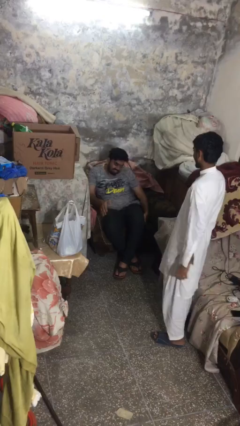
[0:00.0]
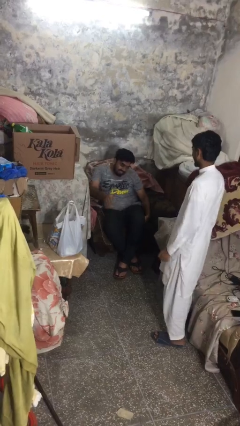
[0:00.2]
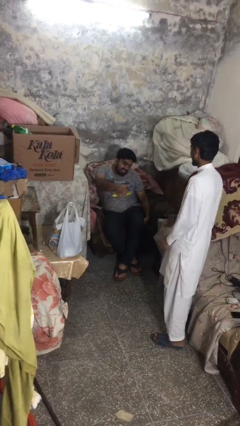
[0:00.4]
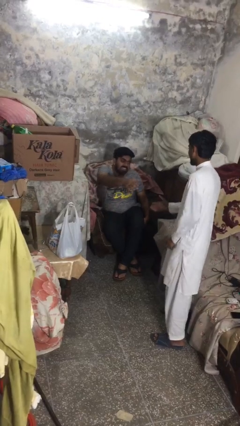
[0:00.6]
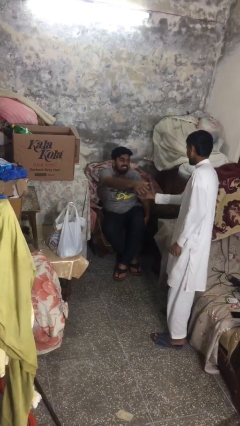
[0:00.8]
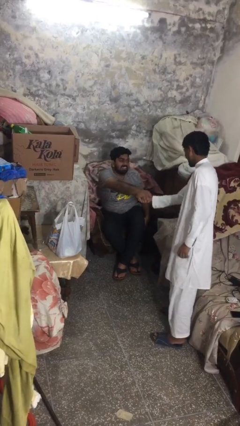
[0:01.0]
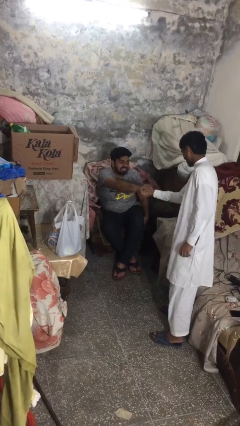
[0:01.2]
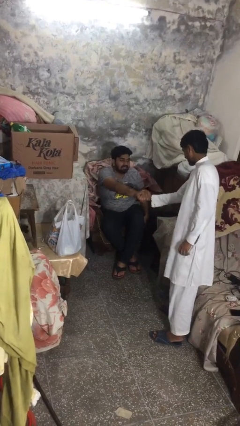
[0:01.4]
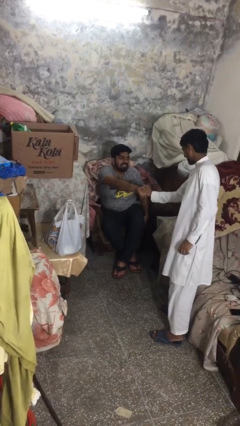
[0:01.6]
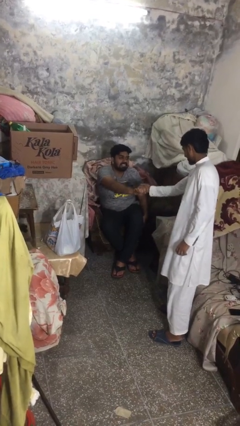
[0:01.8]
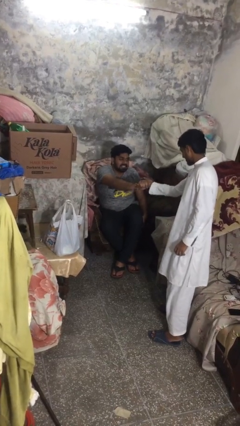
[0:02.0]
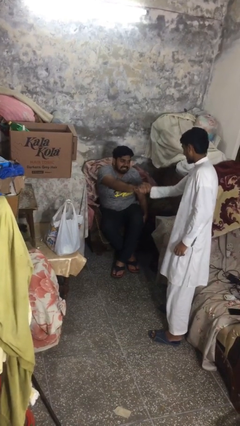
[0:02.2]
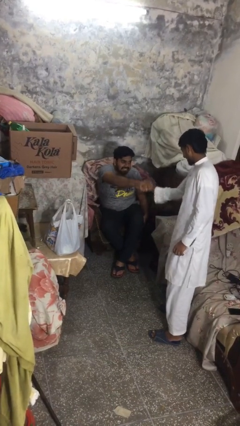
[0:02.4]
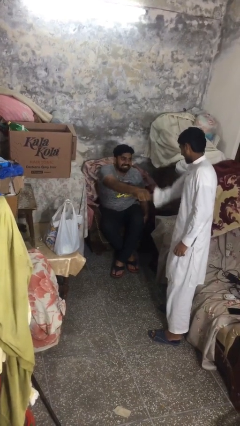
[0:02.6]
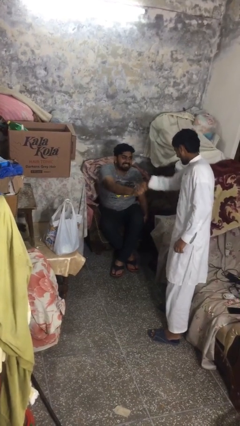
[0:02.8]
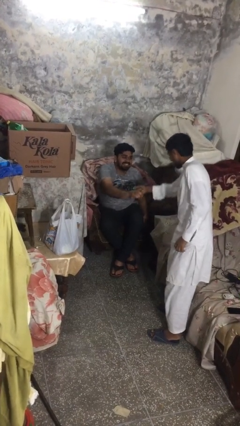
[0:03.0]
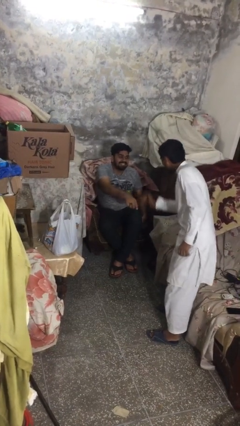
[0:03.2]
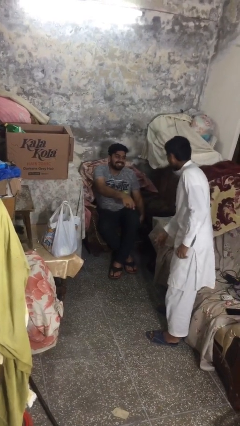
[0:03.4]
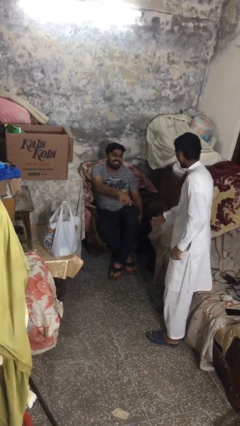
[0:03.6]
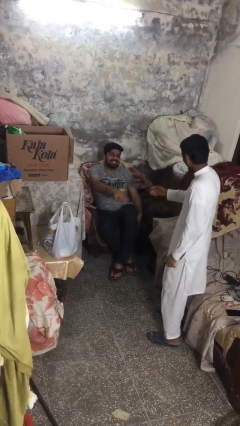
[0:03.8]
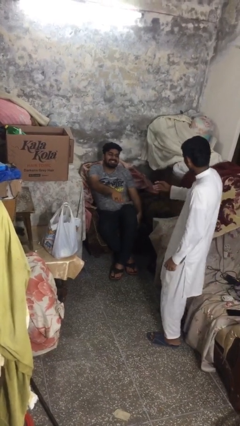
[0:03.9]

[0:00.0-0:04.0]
person shakes hand

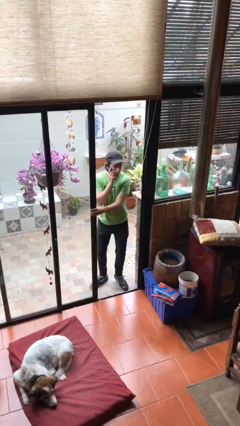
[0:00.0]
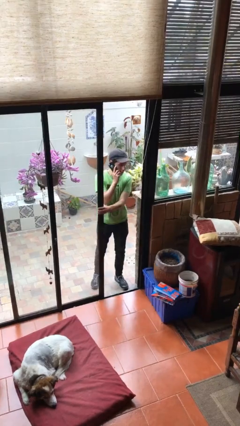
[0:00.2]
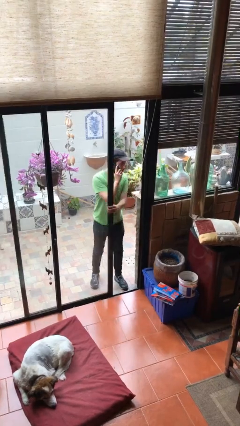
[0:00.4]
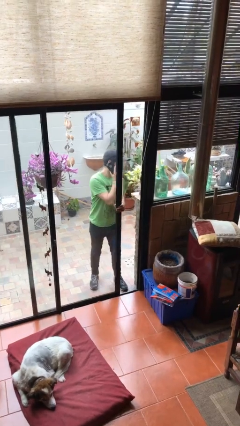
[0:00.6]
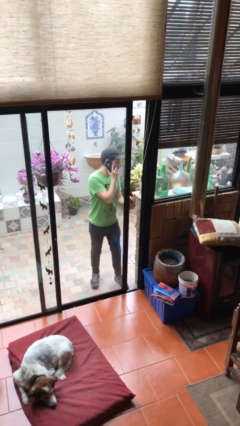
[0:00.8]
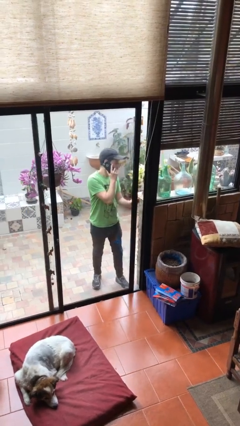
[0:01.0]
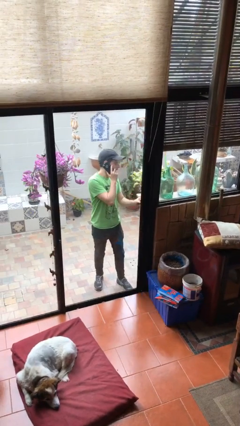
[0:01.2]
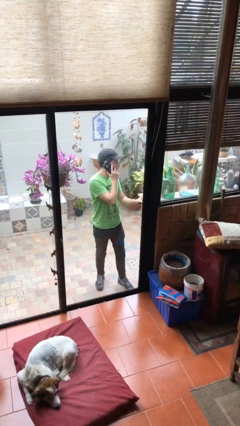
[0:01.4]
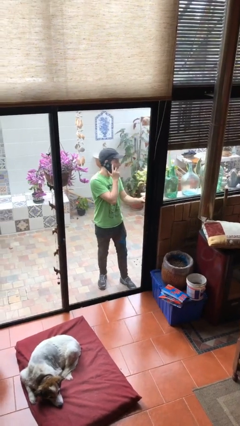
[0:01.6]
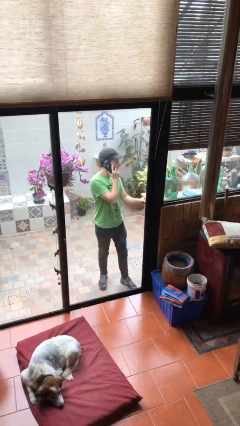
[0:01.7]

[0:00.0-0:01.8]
person closes facility door

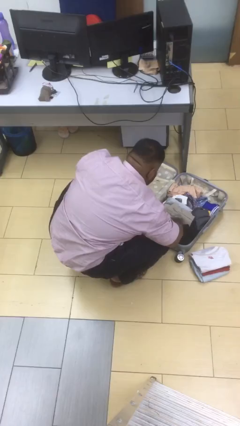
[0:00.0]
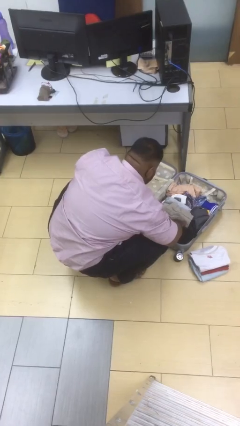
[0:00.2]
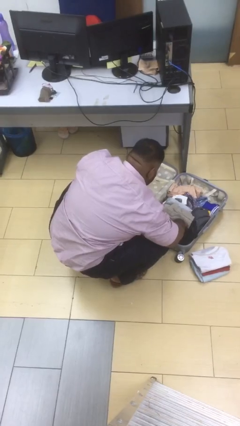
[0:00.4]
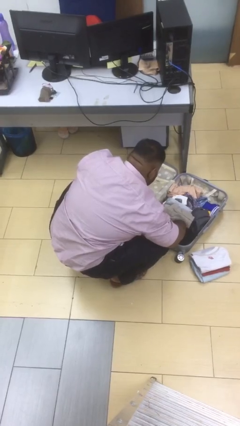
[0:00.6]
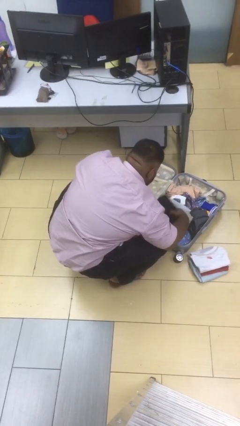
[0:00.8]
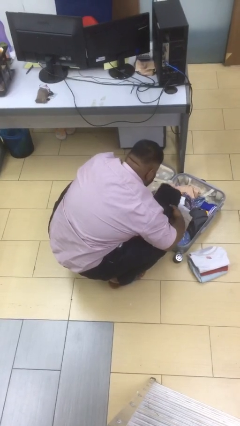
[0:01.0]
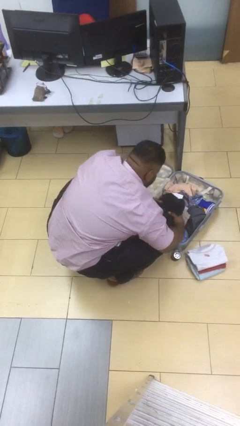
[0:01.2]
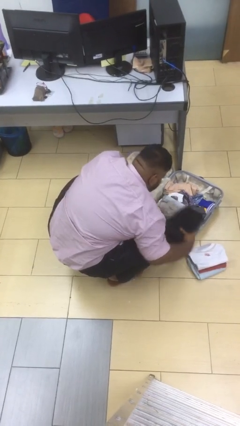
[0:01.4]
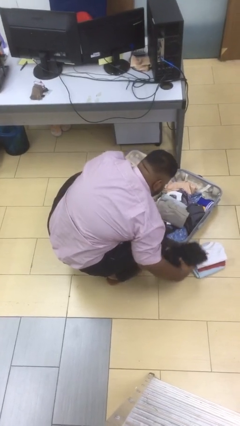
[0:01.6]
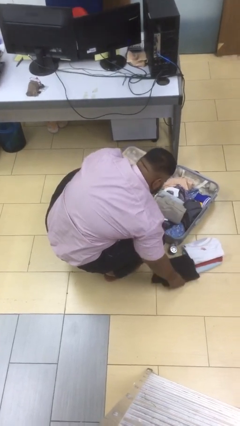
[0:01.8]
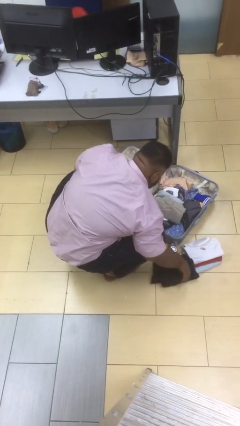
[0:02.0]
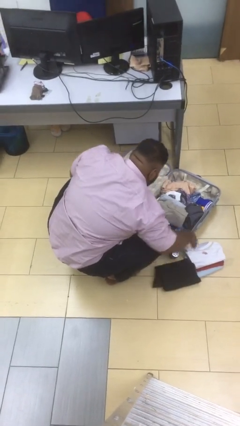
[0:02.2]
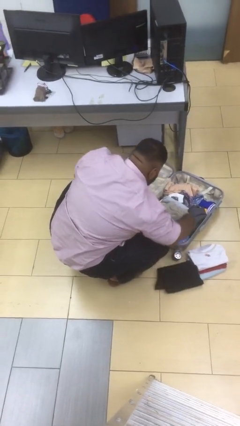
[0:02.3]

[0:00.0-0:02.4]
person unloads clothes from suitcase

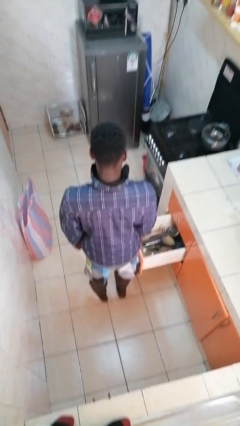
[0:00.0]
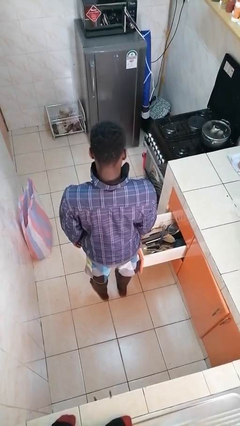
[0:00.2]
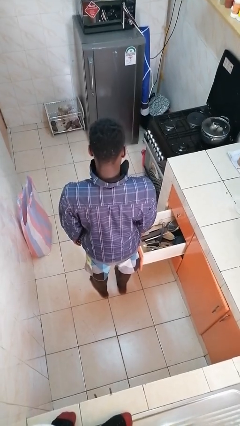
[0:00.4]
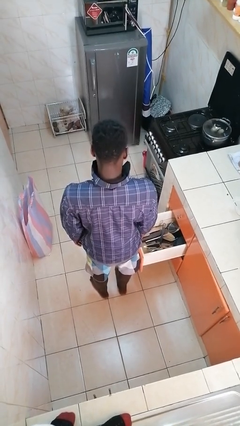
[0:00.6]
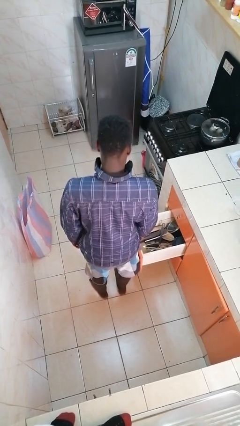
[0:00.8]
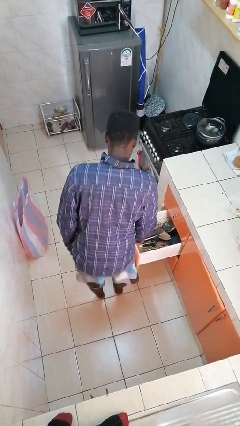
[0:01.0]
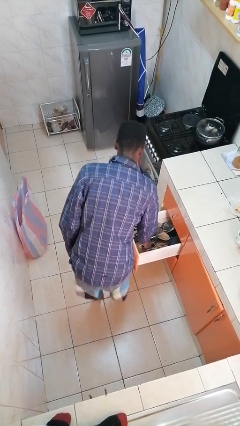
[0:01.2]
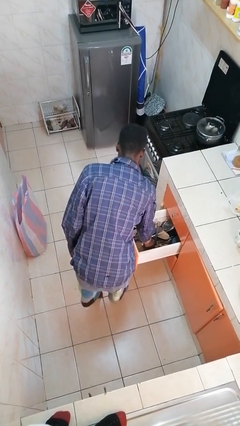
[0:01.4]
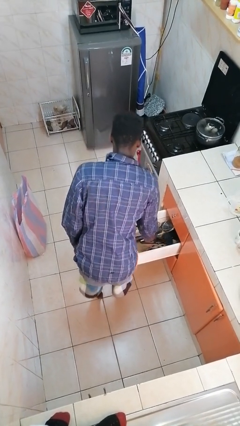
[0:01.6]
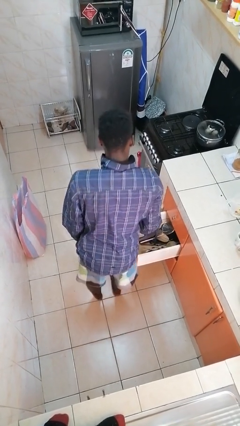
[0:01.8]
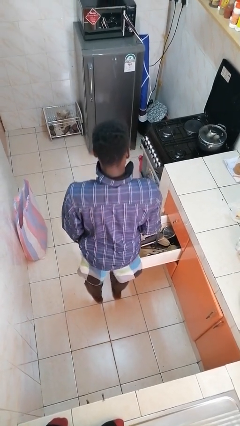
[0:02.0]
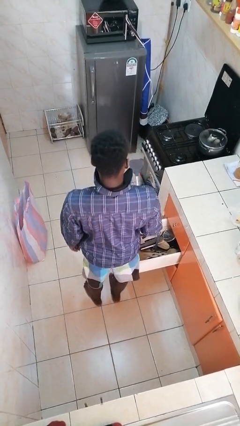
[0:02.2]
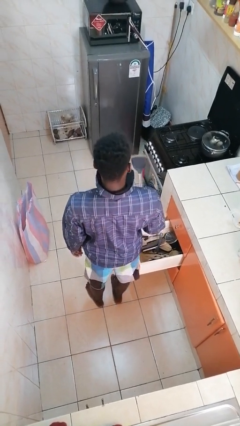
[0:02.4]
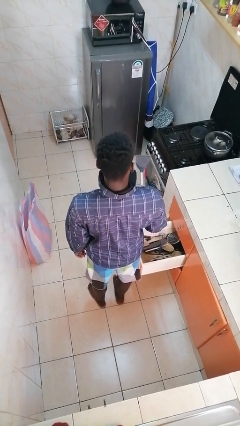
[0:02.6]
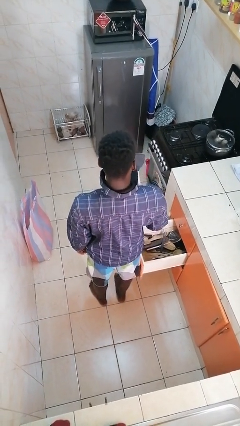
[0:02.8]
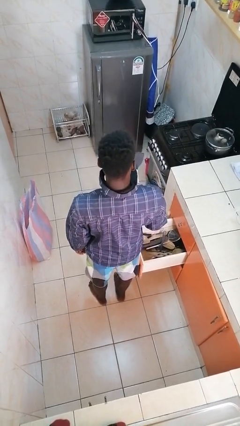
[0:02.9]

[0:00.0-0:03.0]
person takes object from kitchen drawer

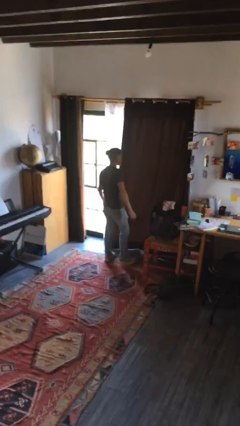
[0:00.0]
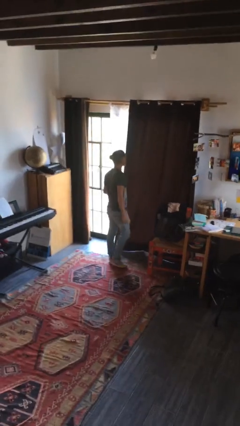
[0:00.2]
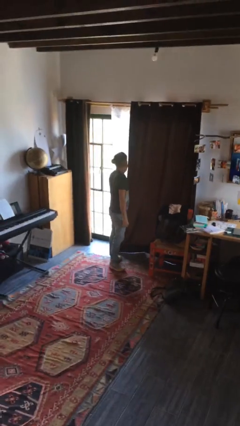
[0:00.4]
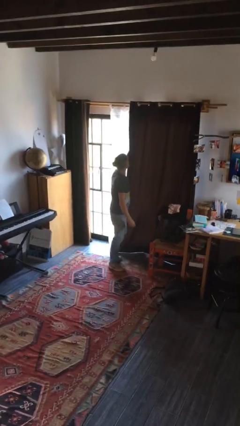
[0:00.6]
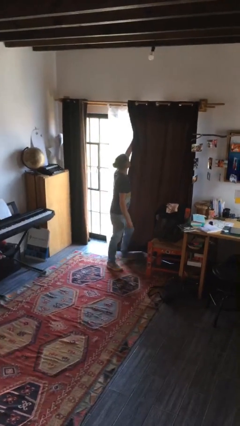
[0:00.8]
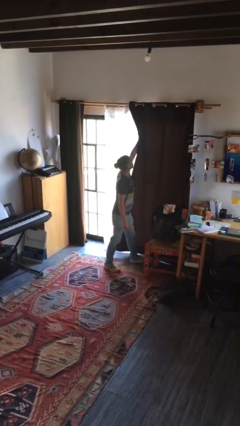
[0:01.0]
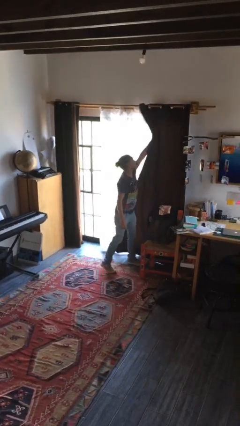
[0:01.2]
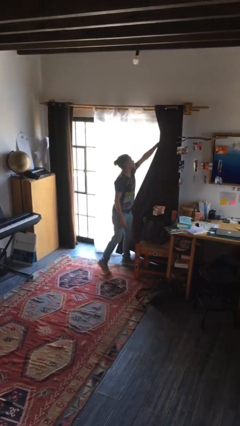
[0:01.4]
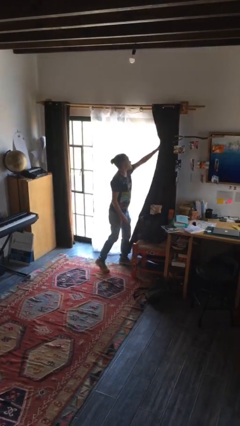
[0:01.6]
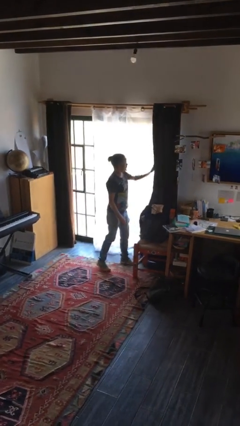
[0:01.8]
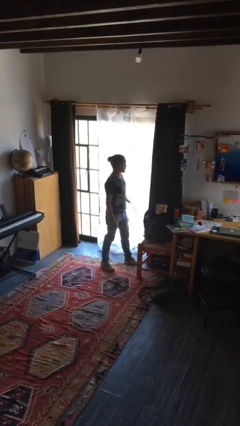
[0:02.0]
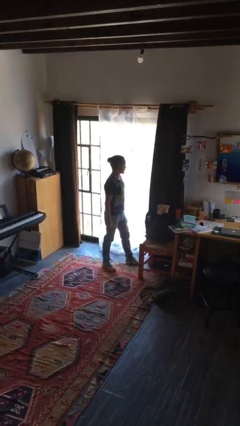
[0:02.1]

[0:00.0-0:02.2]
person opens curtains

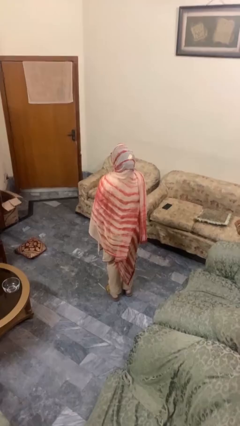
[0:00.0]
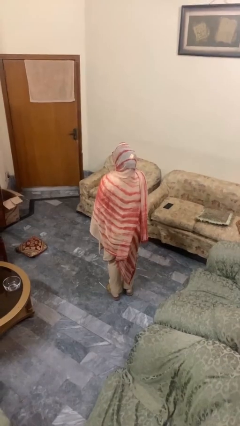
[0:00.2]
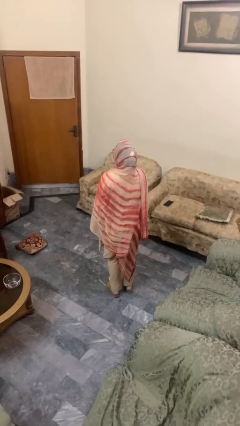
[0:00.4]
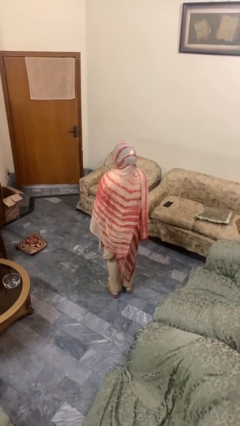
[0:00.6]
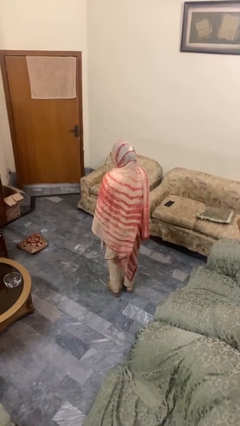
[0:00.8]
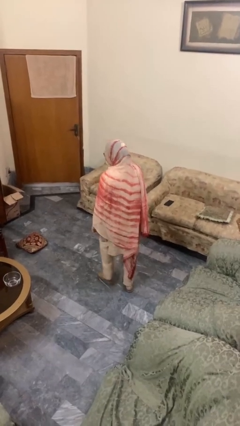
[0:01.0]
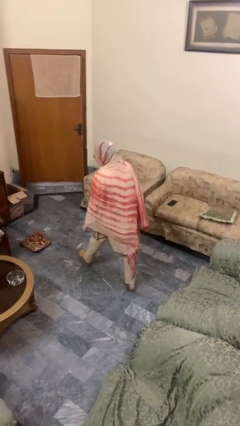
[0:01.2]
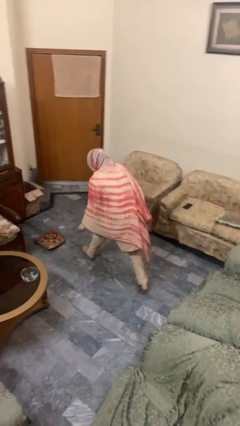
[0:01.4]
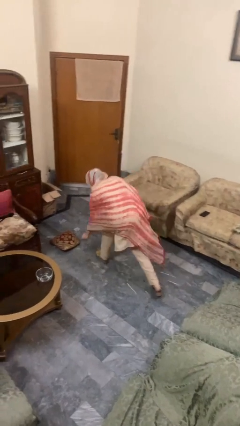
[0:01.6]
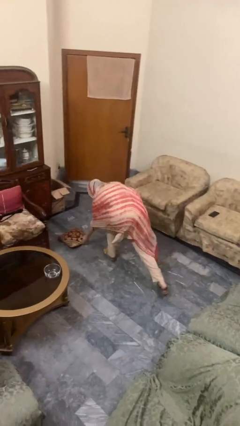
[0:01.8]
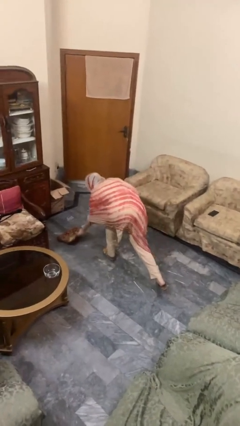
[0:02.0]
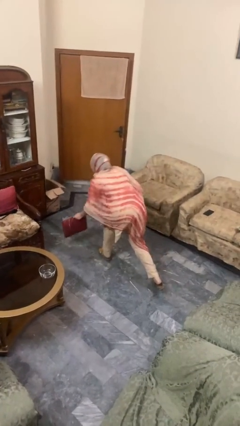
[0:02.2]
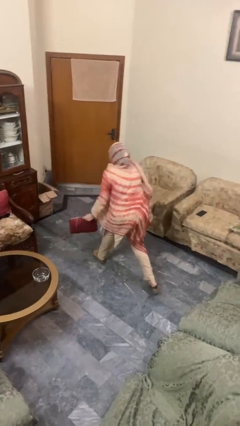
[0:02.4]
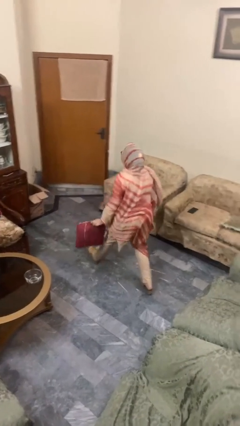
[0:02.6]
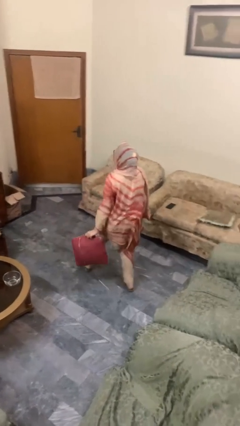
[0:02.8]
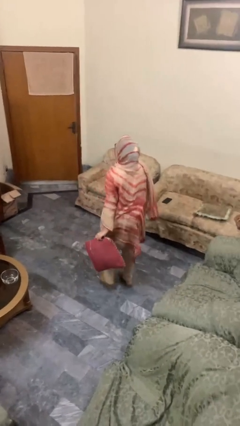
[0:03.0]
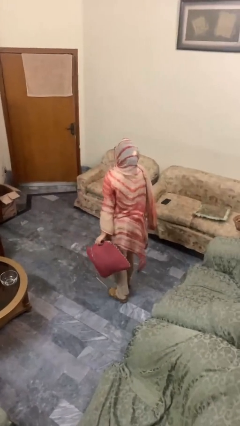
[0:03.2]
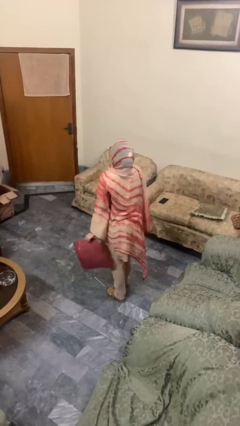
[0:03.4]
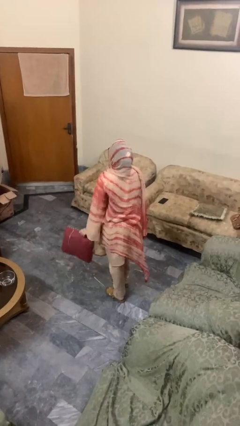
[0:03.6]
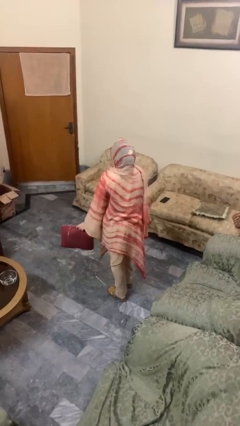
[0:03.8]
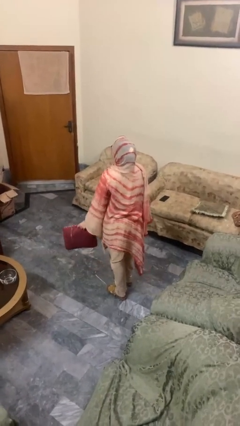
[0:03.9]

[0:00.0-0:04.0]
person picks up object from floor
